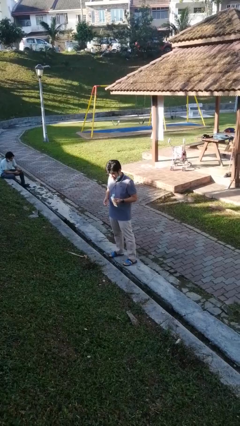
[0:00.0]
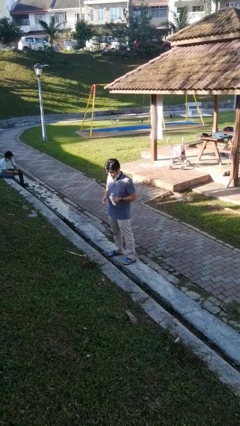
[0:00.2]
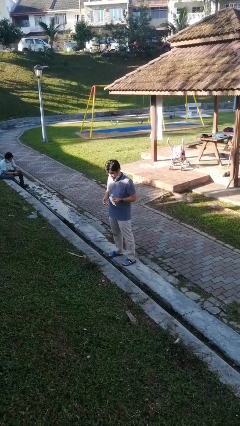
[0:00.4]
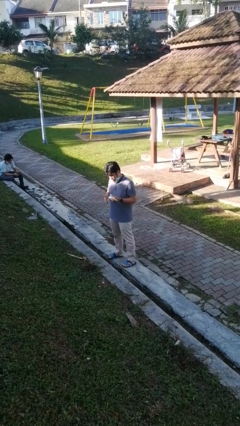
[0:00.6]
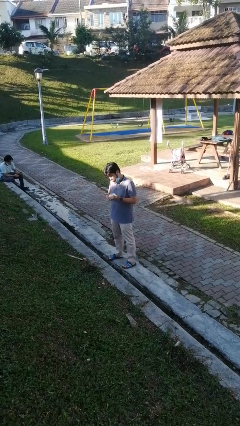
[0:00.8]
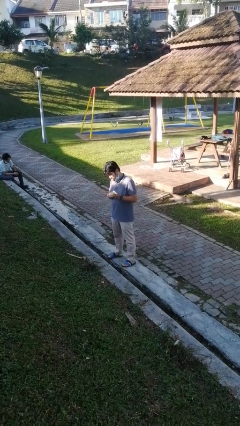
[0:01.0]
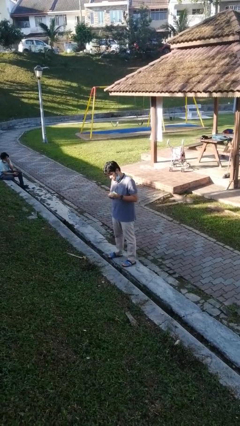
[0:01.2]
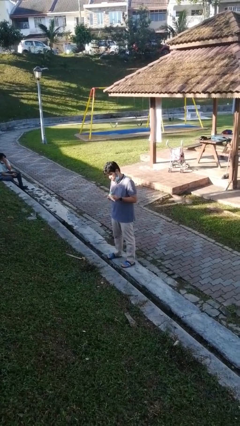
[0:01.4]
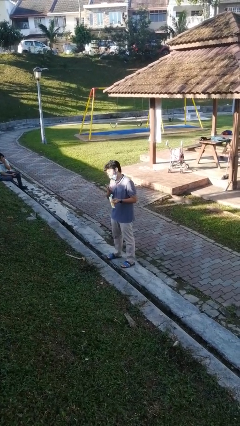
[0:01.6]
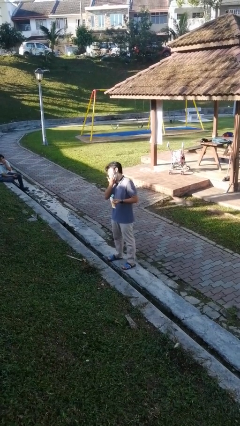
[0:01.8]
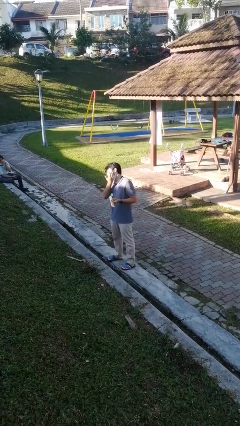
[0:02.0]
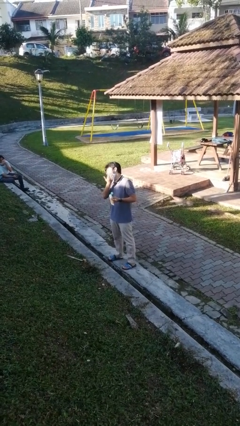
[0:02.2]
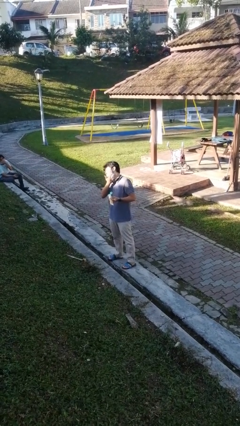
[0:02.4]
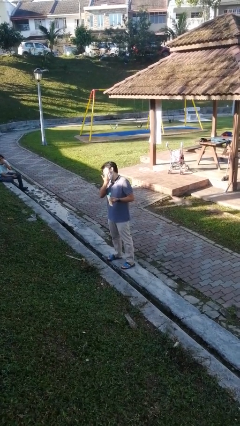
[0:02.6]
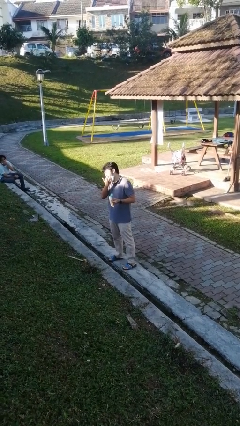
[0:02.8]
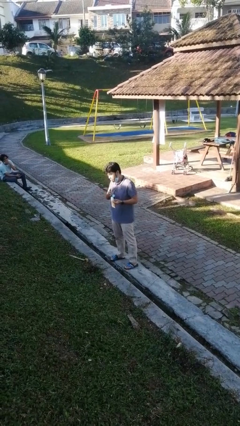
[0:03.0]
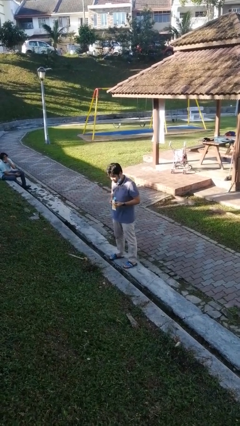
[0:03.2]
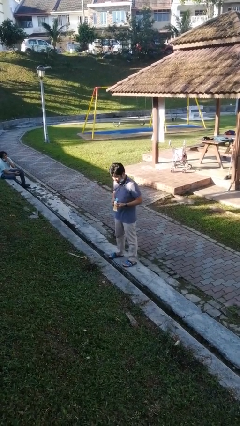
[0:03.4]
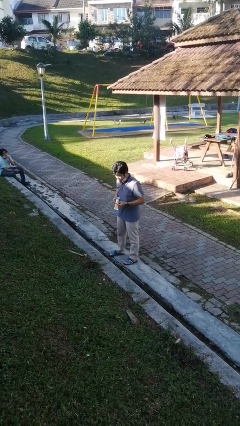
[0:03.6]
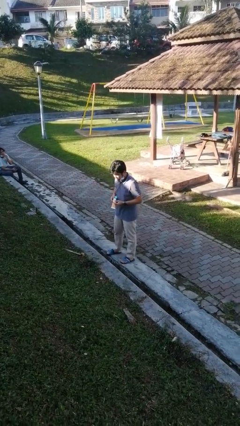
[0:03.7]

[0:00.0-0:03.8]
person applies facial moisturizer

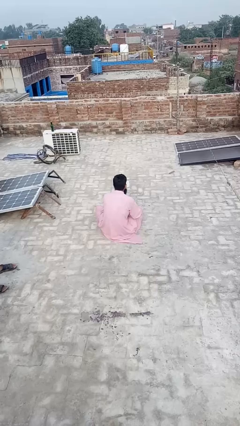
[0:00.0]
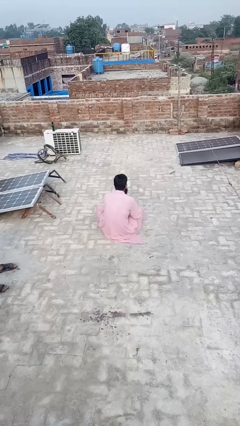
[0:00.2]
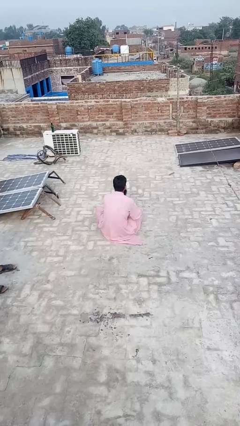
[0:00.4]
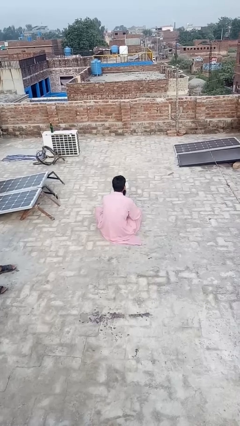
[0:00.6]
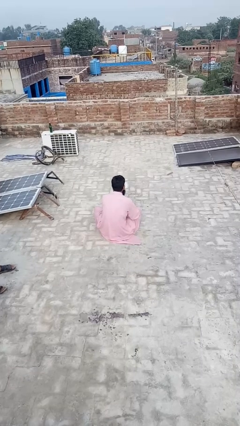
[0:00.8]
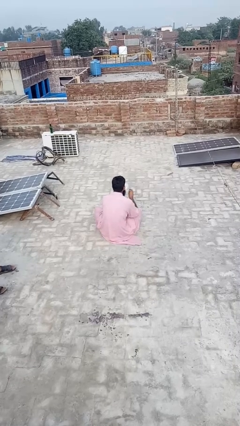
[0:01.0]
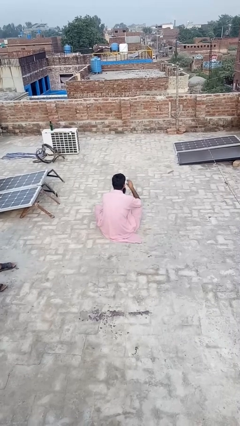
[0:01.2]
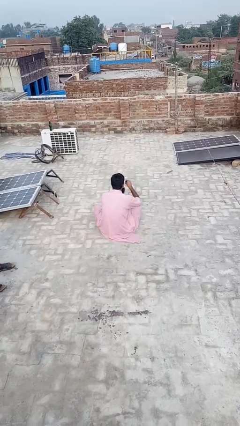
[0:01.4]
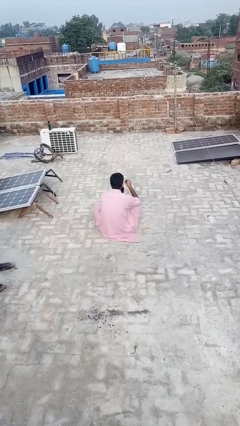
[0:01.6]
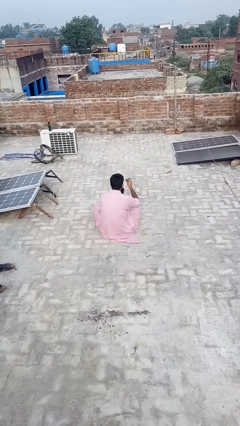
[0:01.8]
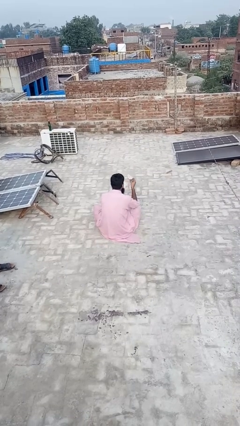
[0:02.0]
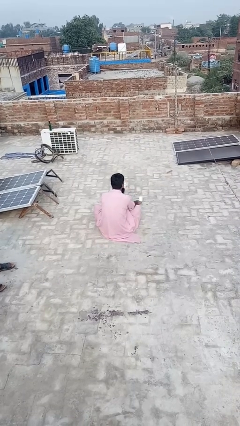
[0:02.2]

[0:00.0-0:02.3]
person discards trash

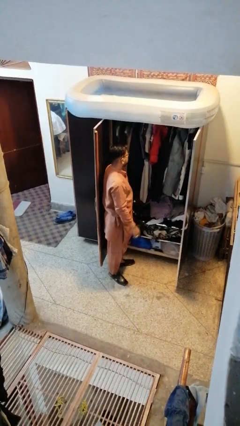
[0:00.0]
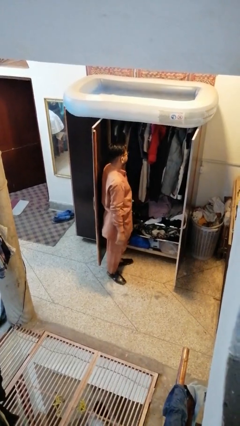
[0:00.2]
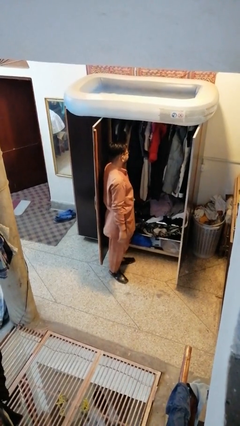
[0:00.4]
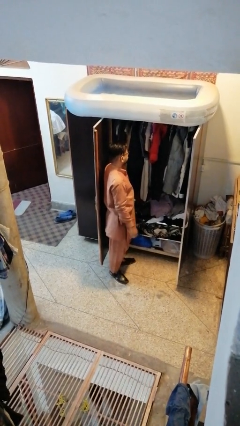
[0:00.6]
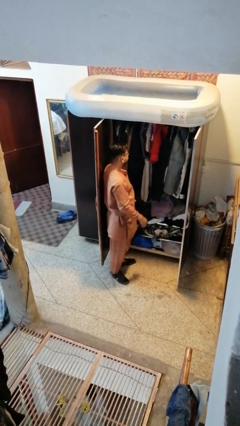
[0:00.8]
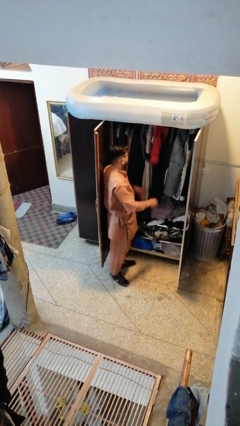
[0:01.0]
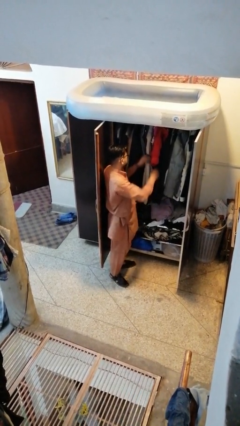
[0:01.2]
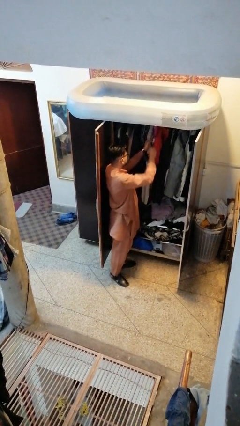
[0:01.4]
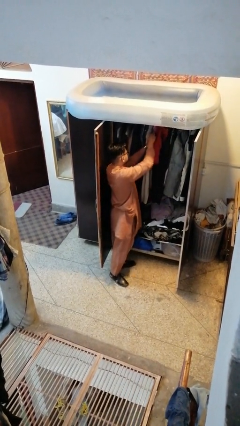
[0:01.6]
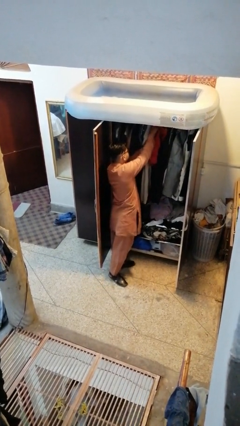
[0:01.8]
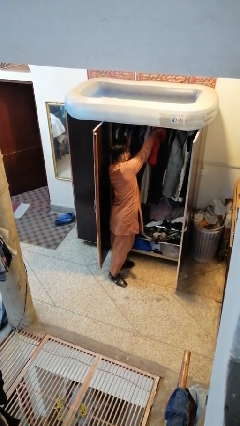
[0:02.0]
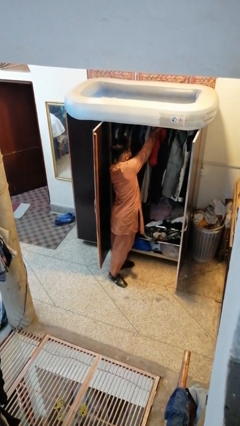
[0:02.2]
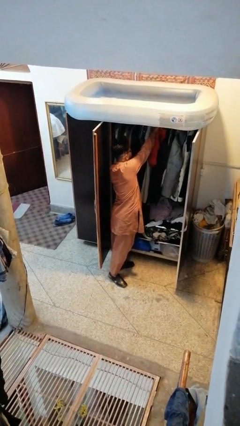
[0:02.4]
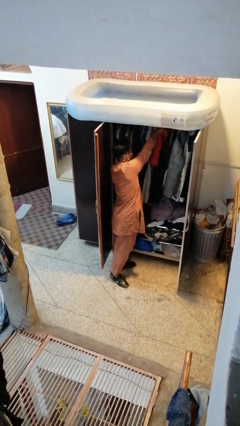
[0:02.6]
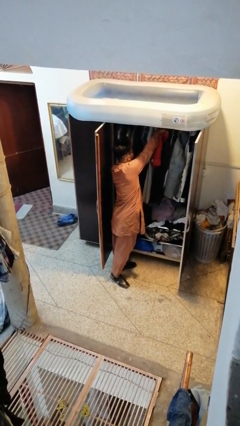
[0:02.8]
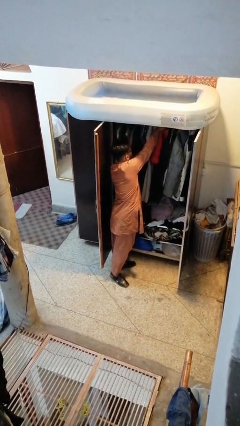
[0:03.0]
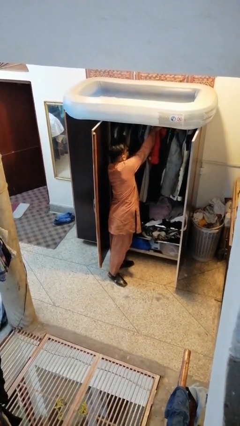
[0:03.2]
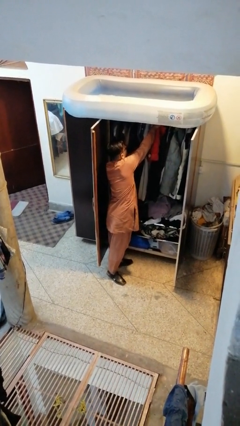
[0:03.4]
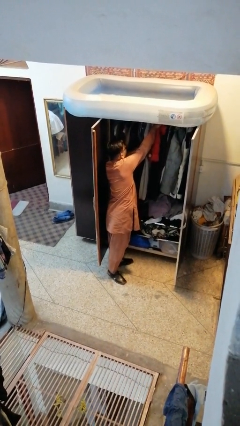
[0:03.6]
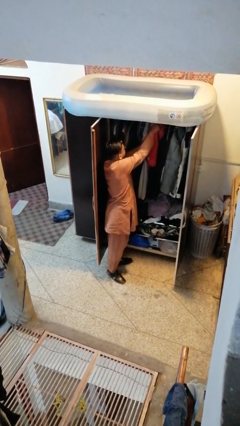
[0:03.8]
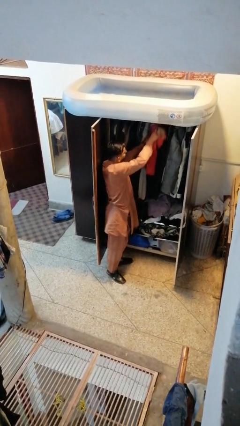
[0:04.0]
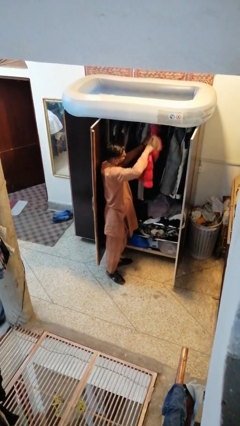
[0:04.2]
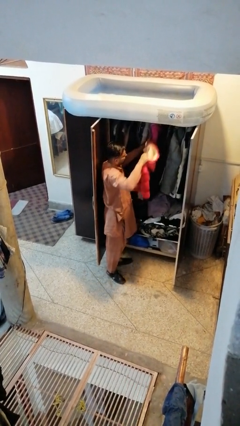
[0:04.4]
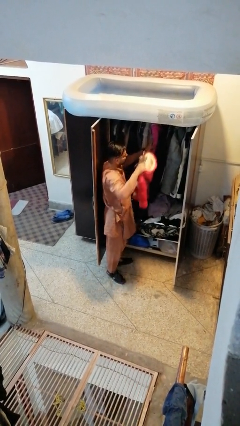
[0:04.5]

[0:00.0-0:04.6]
person takes clothes from closet

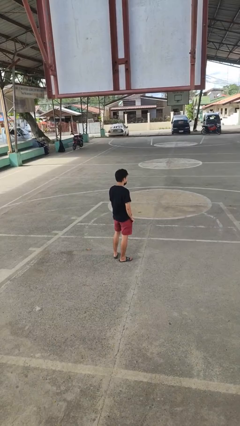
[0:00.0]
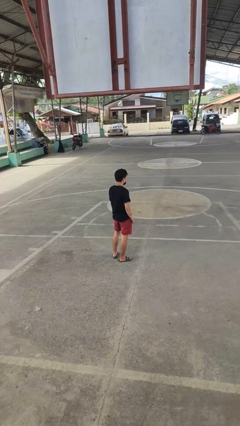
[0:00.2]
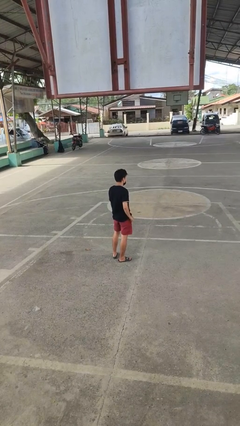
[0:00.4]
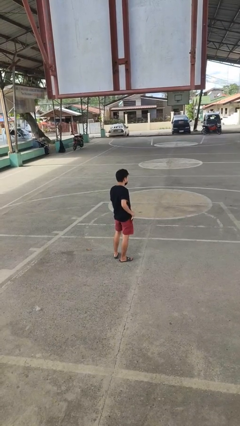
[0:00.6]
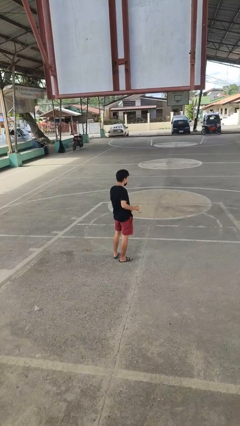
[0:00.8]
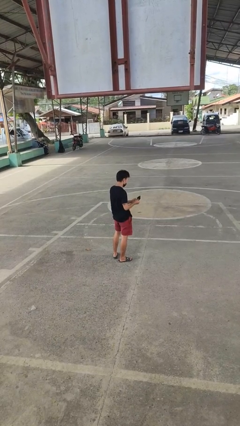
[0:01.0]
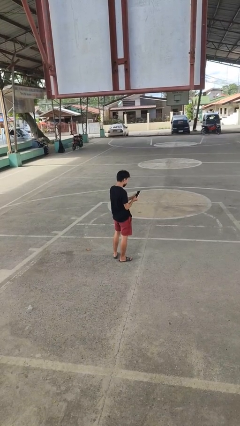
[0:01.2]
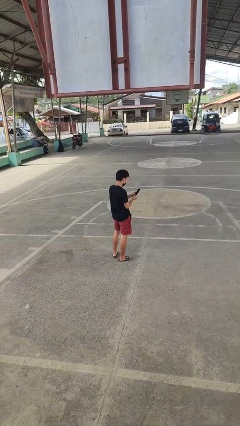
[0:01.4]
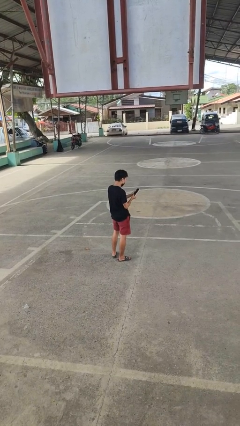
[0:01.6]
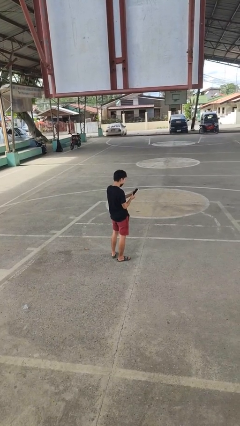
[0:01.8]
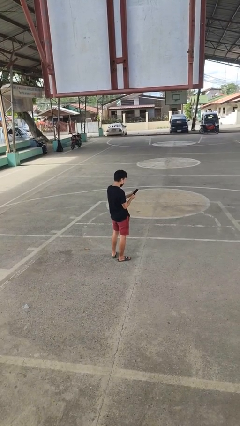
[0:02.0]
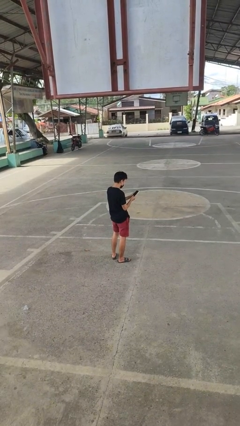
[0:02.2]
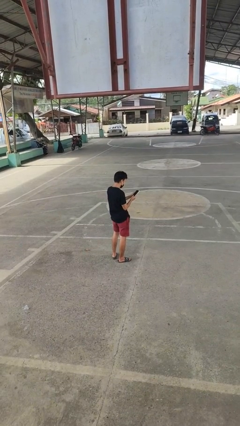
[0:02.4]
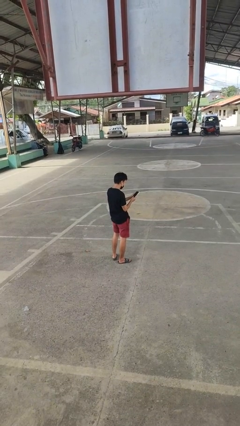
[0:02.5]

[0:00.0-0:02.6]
person takes phone from pocket

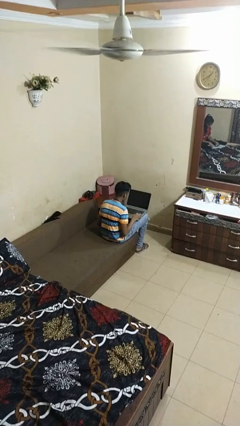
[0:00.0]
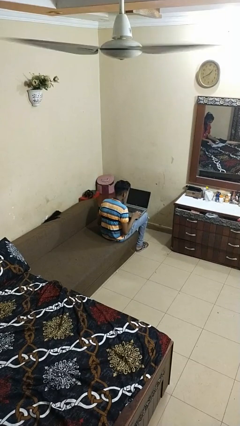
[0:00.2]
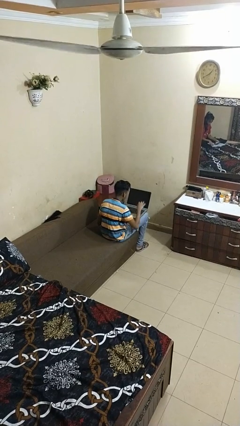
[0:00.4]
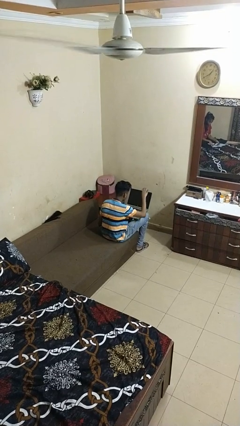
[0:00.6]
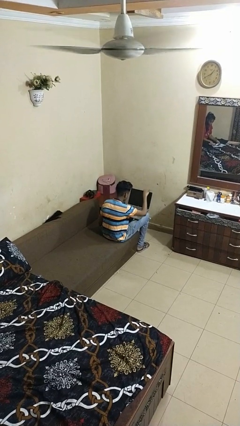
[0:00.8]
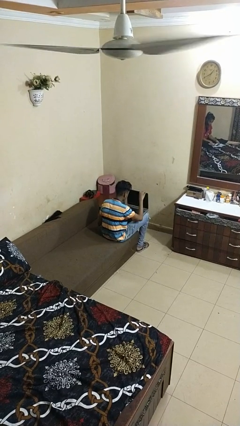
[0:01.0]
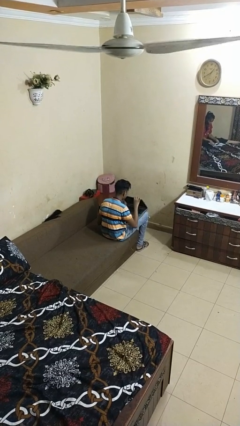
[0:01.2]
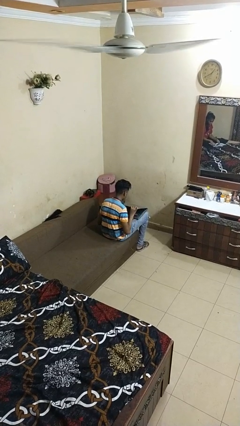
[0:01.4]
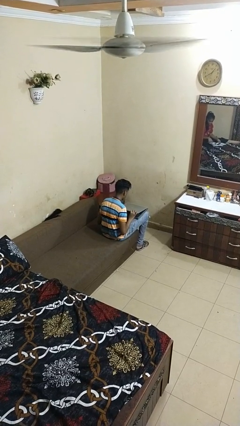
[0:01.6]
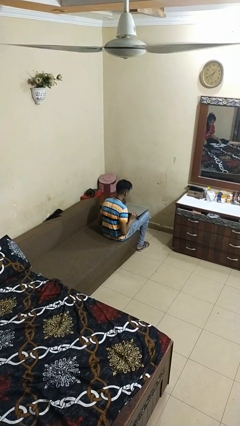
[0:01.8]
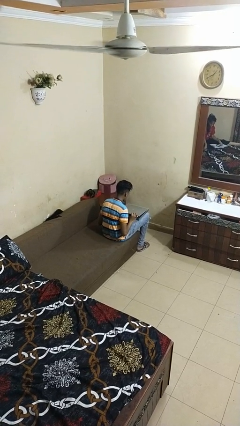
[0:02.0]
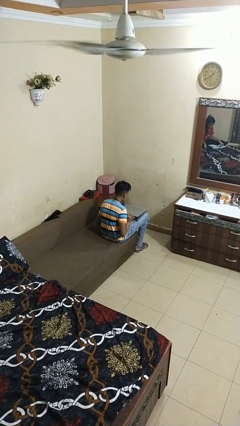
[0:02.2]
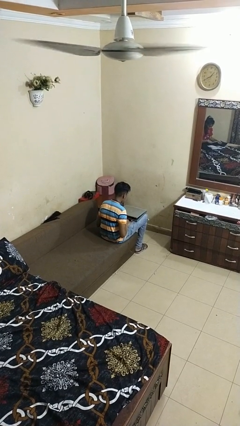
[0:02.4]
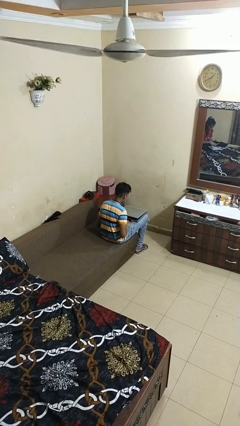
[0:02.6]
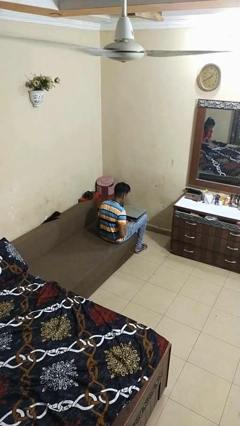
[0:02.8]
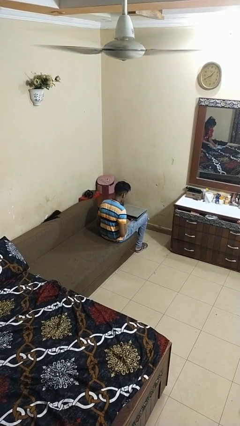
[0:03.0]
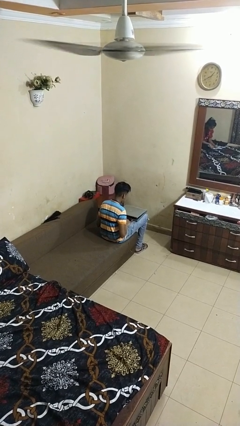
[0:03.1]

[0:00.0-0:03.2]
person closes laptop

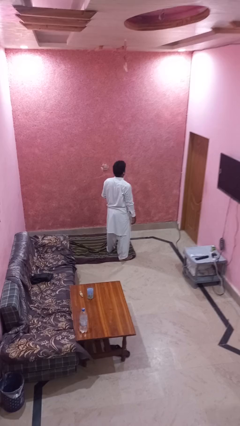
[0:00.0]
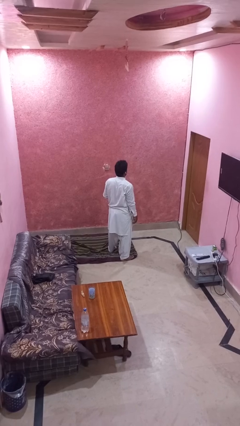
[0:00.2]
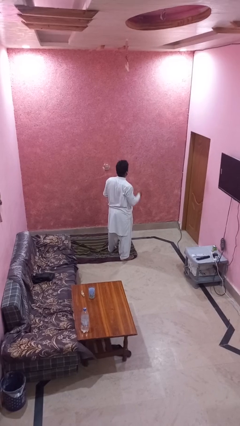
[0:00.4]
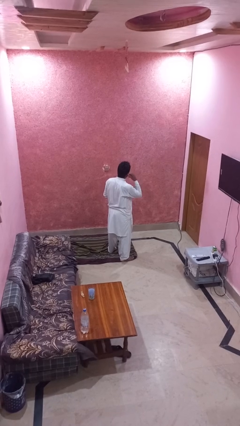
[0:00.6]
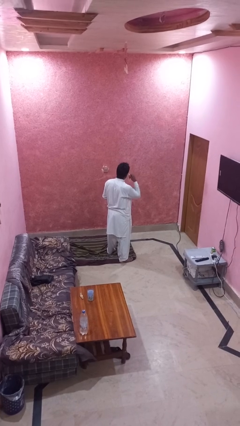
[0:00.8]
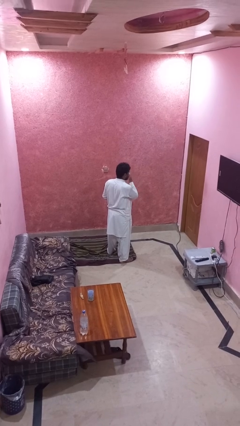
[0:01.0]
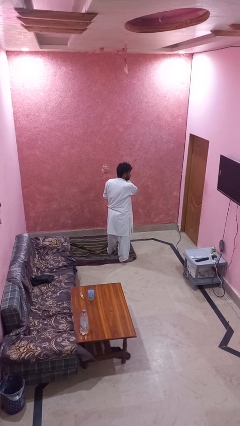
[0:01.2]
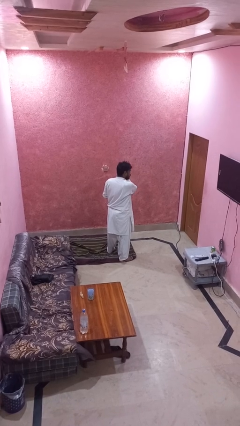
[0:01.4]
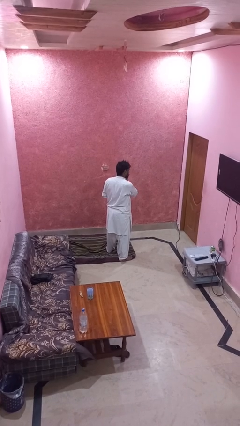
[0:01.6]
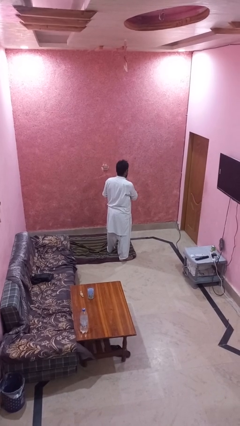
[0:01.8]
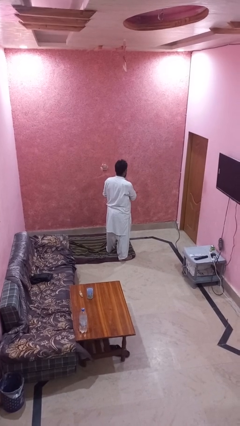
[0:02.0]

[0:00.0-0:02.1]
person takes off headphones
